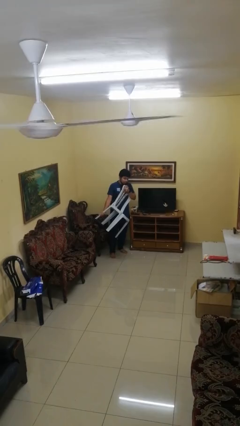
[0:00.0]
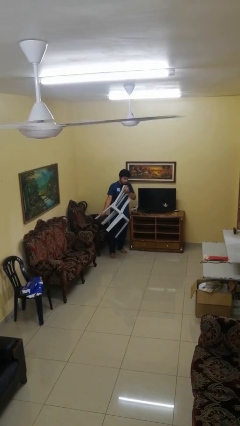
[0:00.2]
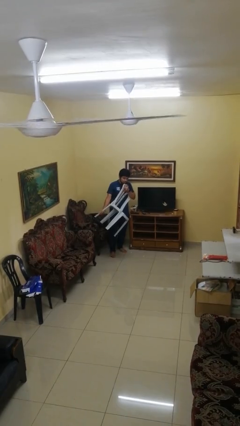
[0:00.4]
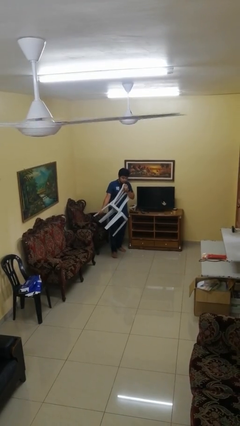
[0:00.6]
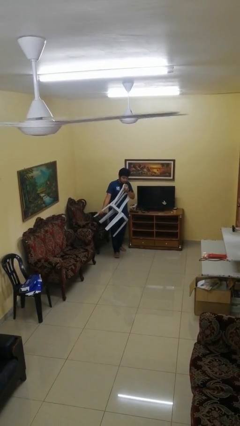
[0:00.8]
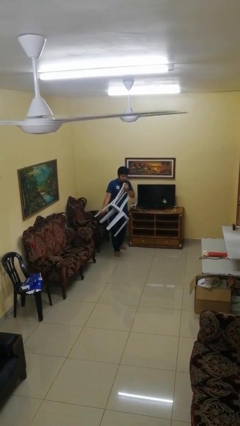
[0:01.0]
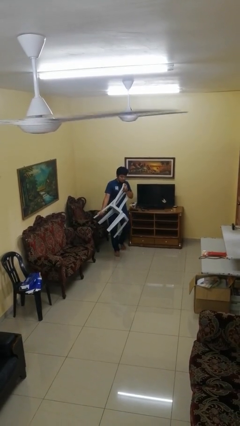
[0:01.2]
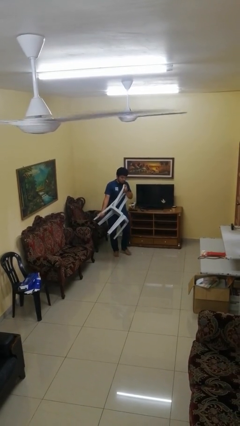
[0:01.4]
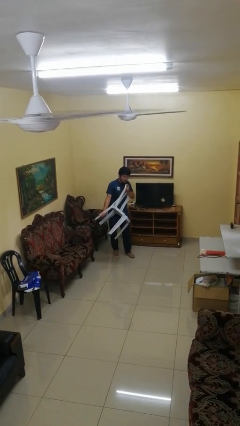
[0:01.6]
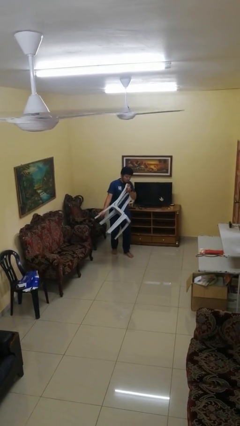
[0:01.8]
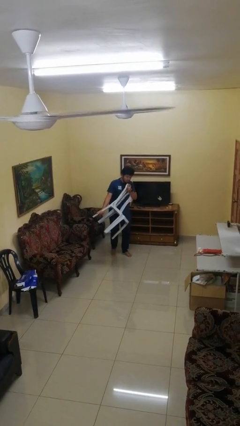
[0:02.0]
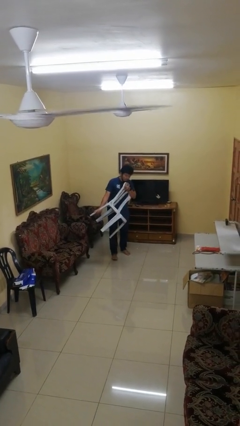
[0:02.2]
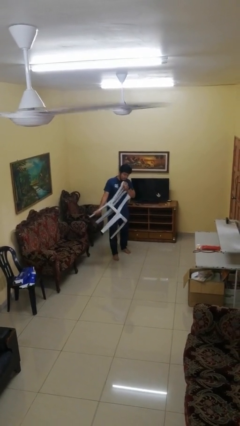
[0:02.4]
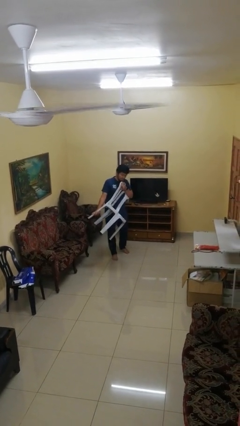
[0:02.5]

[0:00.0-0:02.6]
person carries furniture

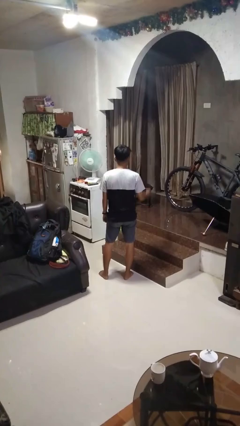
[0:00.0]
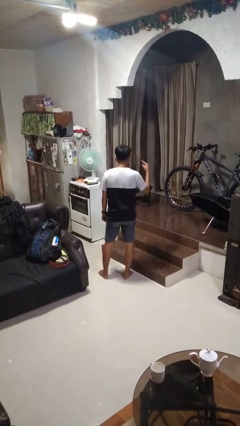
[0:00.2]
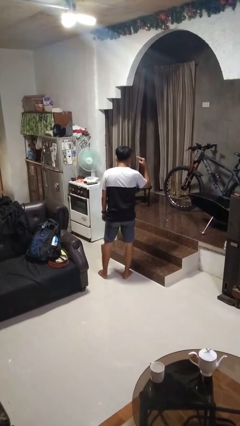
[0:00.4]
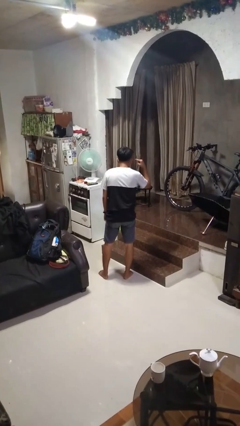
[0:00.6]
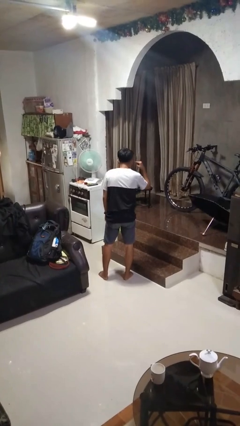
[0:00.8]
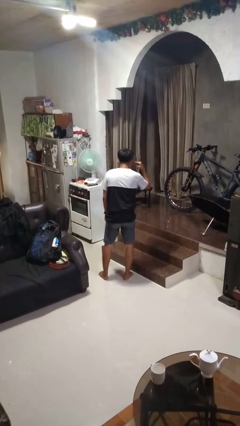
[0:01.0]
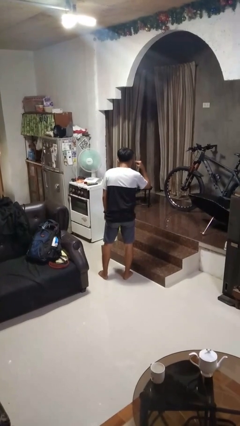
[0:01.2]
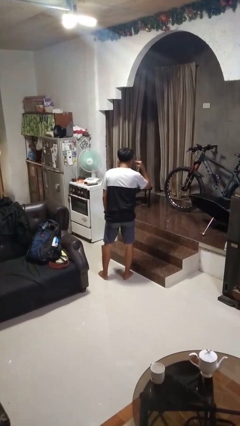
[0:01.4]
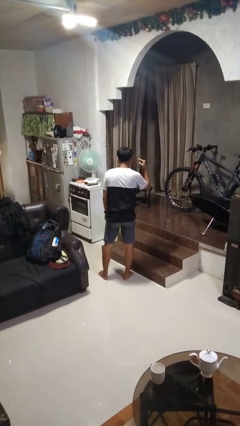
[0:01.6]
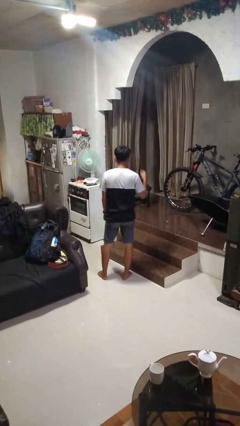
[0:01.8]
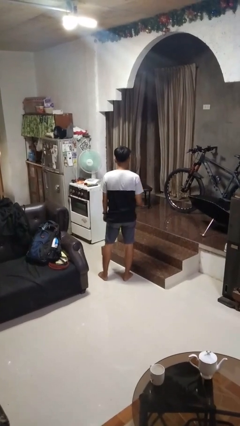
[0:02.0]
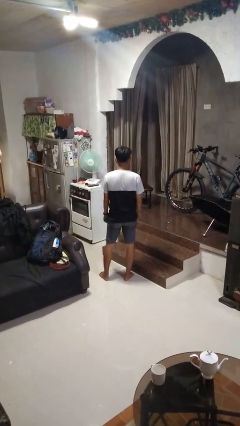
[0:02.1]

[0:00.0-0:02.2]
person gestures listen closely

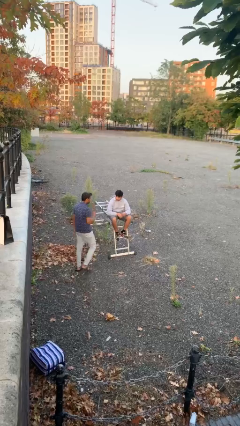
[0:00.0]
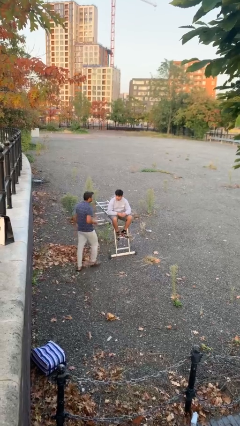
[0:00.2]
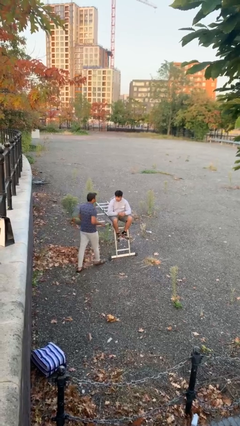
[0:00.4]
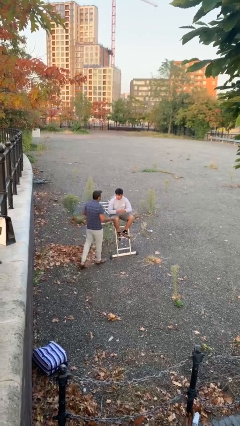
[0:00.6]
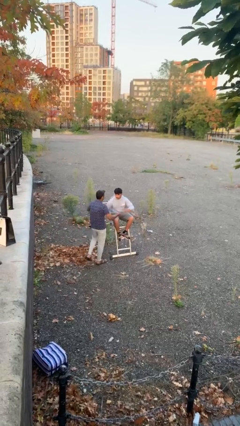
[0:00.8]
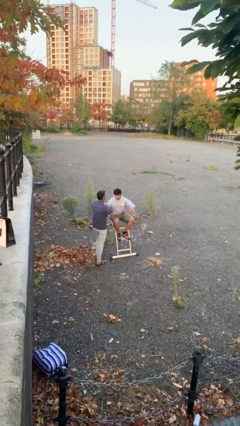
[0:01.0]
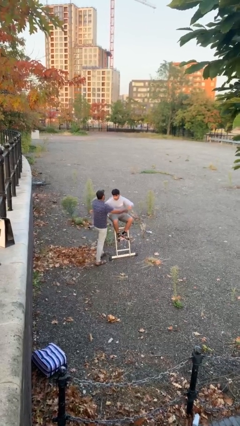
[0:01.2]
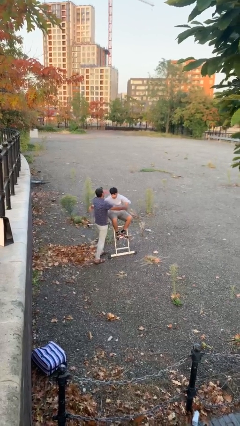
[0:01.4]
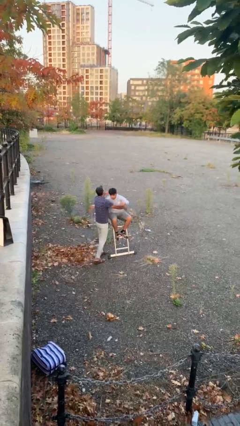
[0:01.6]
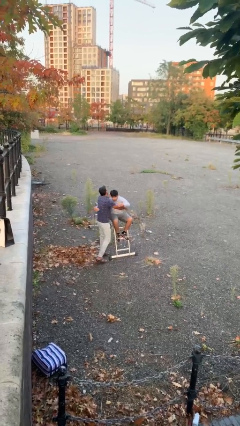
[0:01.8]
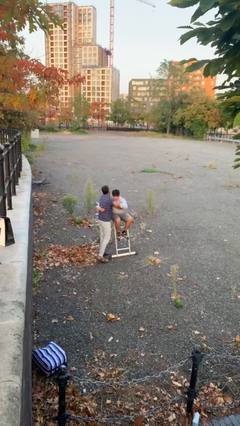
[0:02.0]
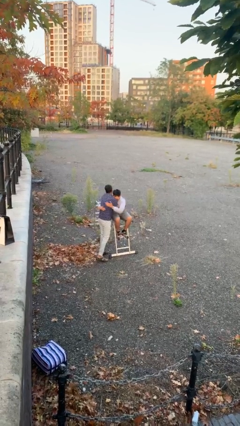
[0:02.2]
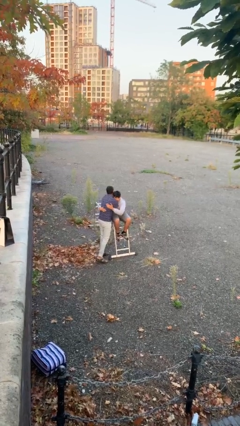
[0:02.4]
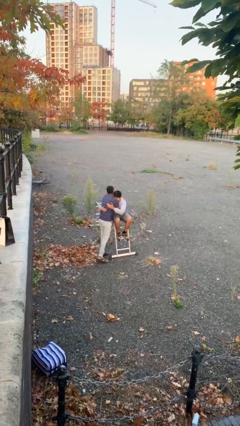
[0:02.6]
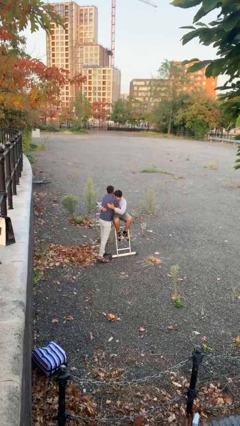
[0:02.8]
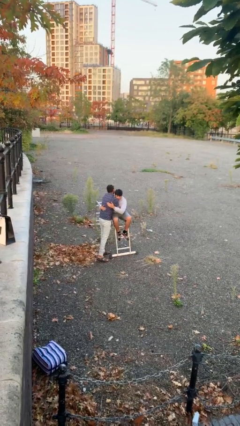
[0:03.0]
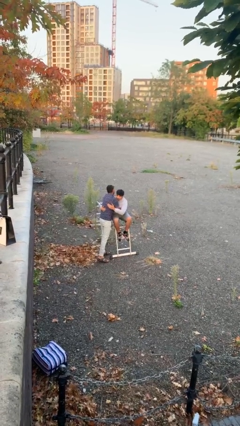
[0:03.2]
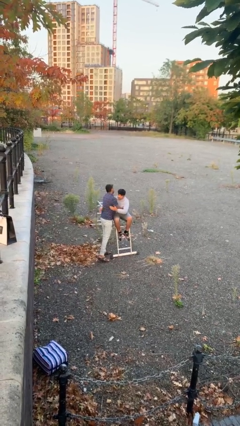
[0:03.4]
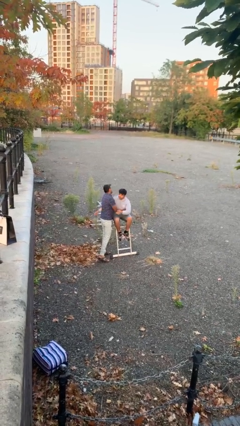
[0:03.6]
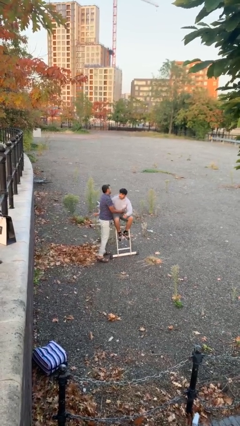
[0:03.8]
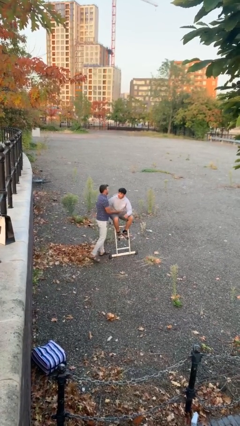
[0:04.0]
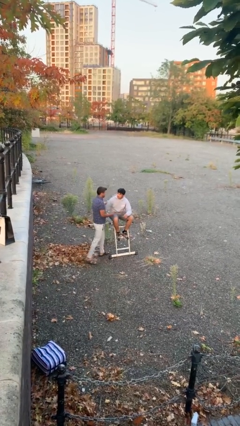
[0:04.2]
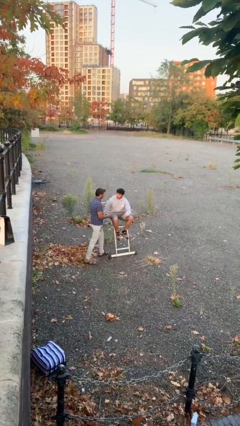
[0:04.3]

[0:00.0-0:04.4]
person embraces person

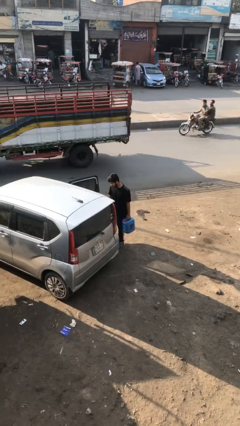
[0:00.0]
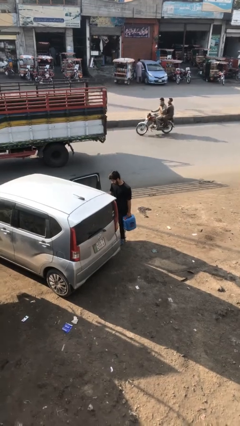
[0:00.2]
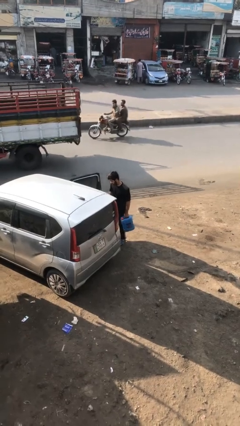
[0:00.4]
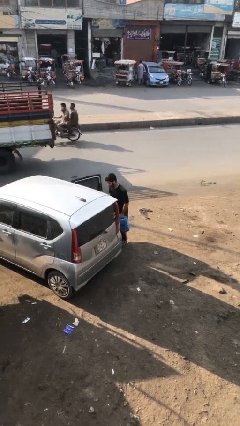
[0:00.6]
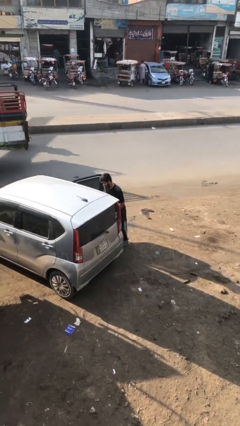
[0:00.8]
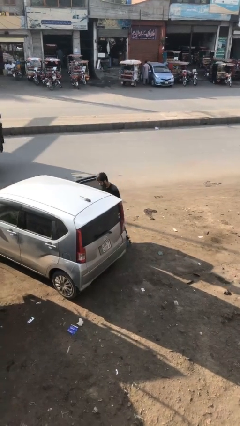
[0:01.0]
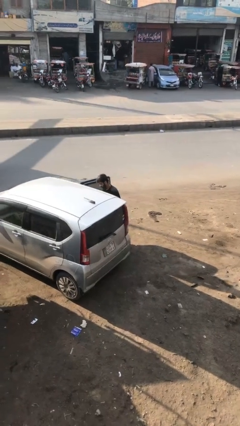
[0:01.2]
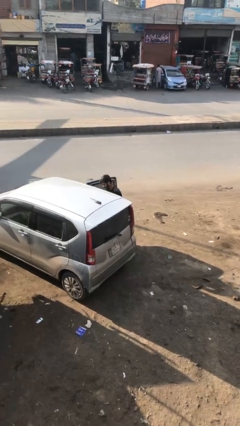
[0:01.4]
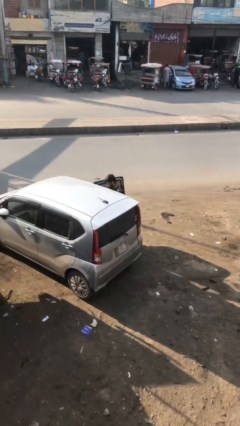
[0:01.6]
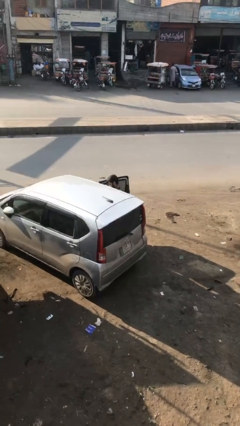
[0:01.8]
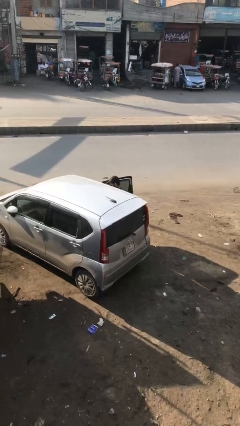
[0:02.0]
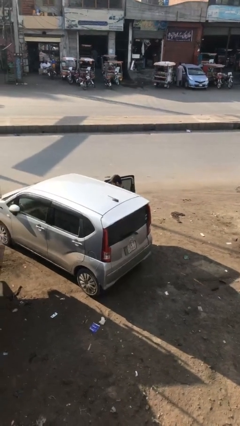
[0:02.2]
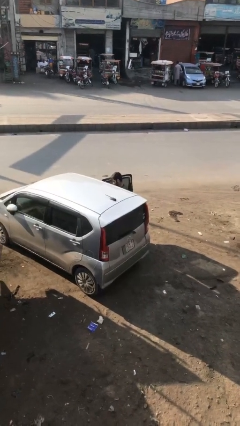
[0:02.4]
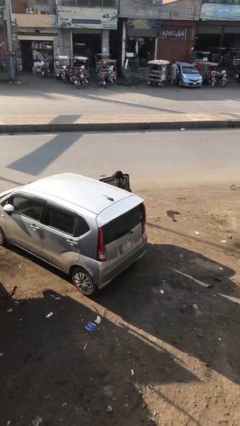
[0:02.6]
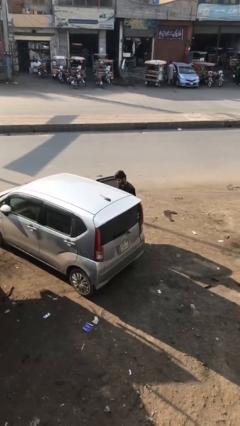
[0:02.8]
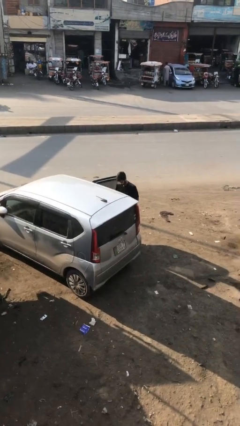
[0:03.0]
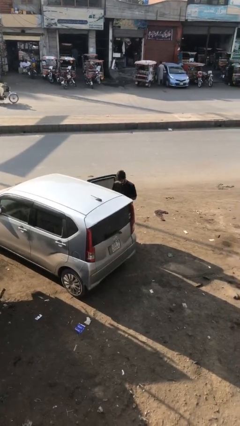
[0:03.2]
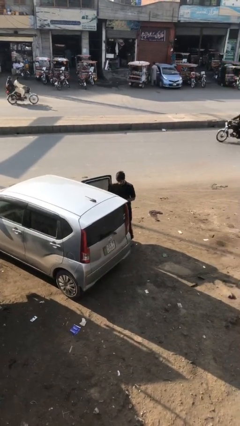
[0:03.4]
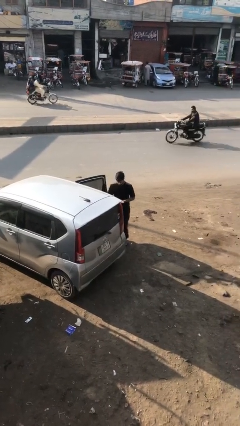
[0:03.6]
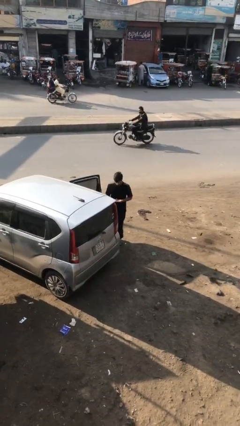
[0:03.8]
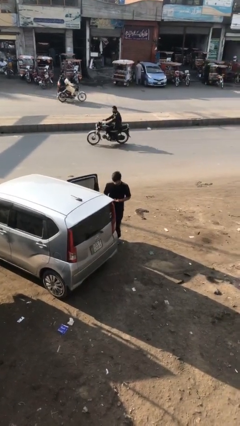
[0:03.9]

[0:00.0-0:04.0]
person loads car

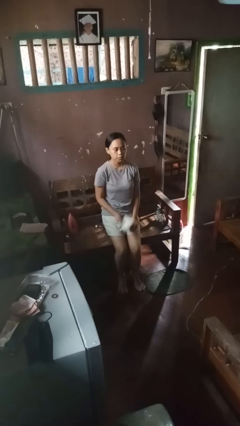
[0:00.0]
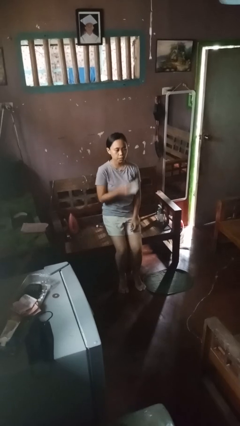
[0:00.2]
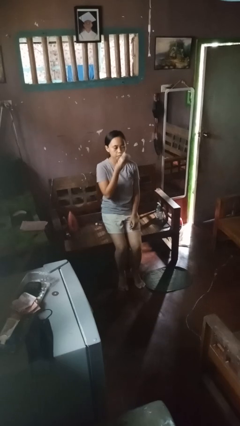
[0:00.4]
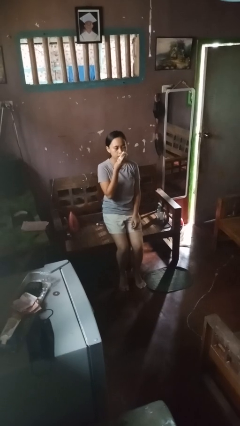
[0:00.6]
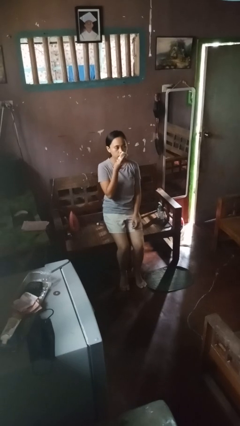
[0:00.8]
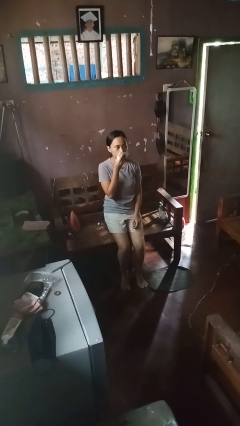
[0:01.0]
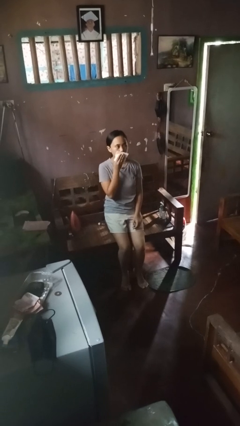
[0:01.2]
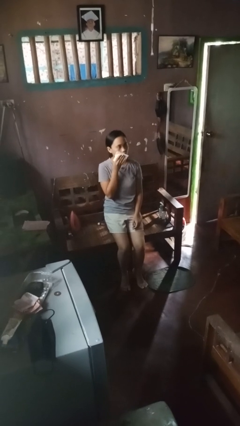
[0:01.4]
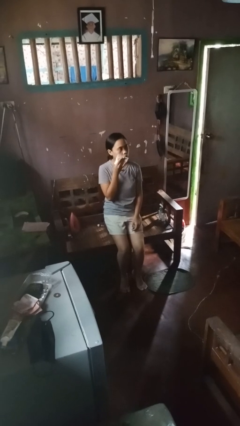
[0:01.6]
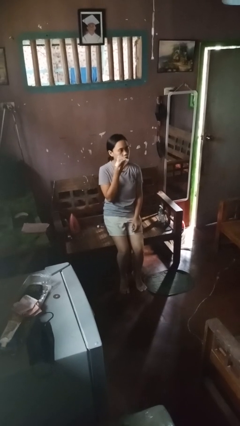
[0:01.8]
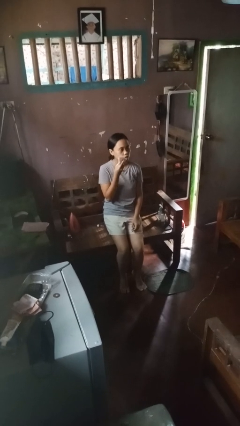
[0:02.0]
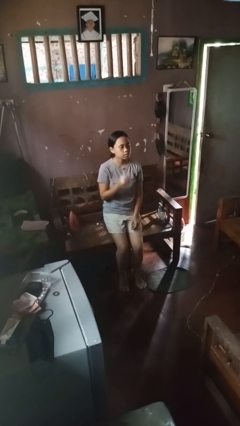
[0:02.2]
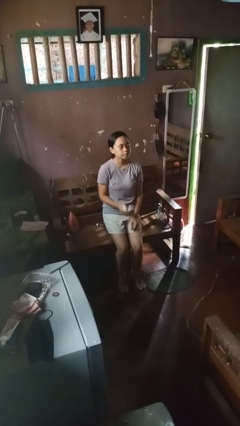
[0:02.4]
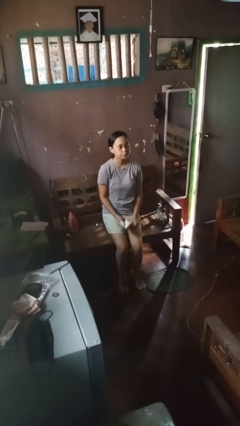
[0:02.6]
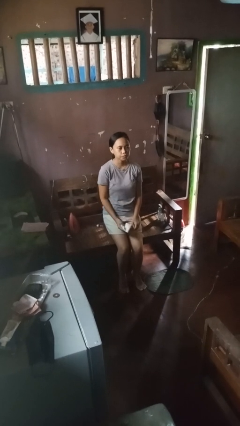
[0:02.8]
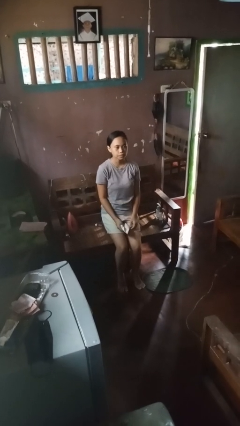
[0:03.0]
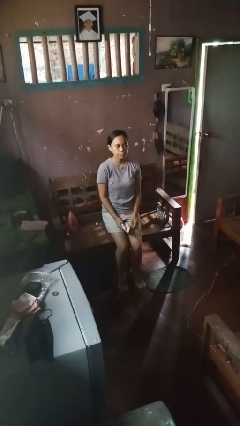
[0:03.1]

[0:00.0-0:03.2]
person wipes mouth with napkin

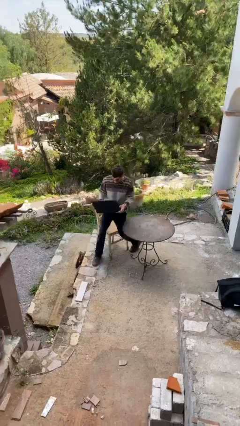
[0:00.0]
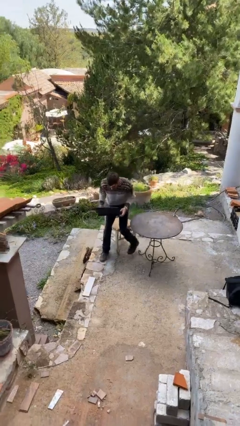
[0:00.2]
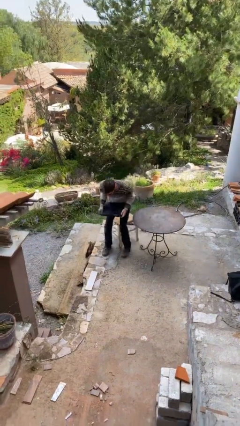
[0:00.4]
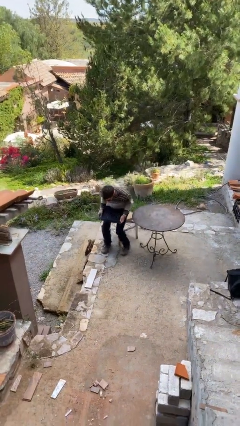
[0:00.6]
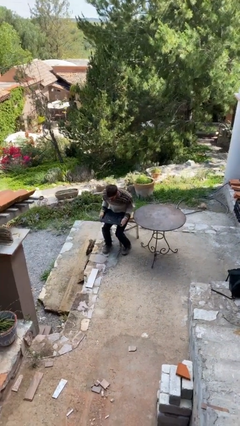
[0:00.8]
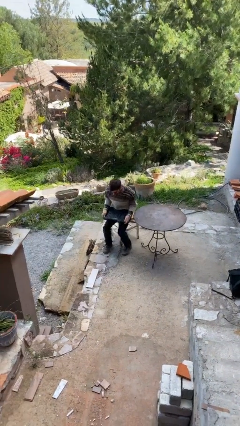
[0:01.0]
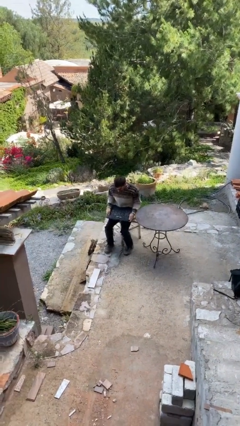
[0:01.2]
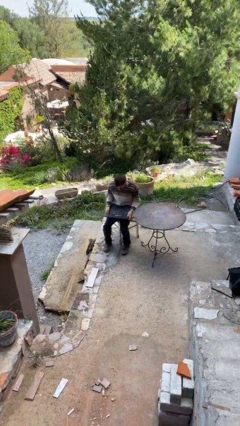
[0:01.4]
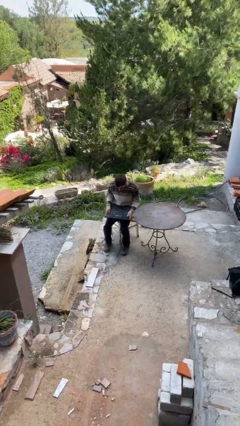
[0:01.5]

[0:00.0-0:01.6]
person sits down
